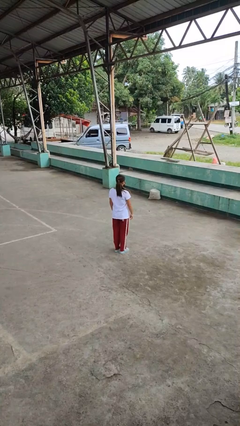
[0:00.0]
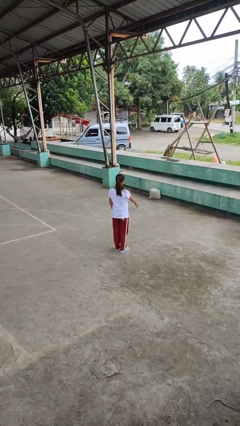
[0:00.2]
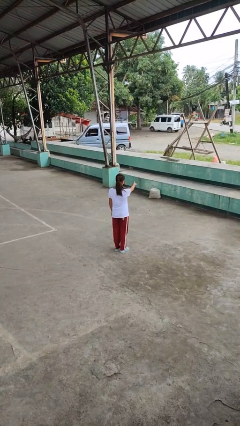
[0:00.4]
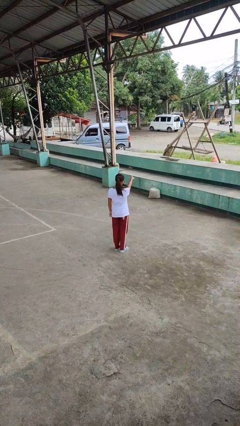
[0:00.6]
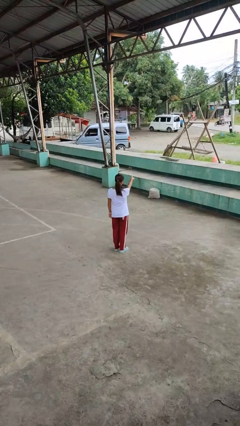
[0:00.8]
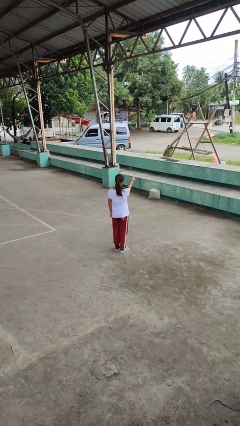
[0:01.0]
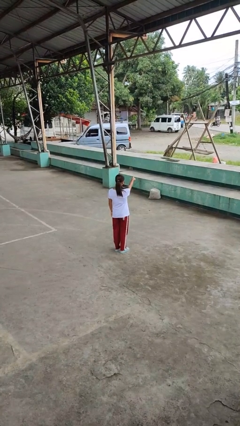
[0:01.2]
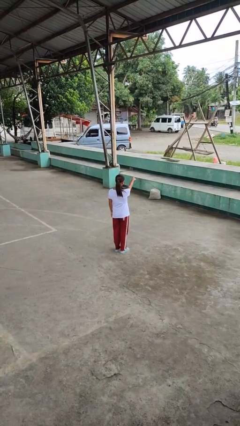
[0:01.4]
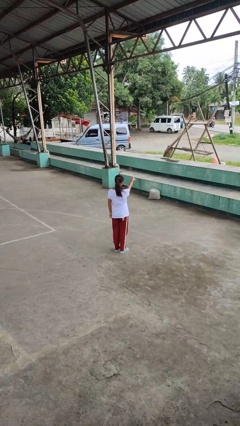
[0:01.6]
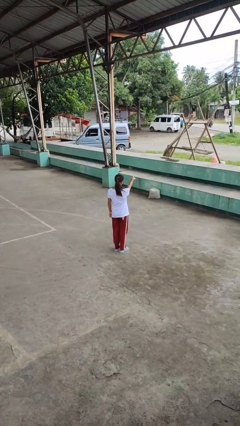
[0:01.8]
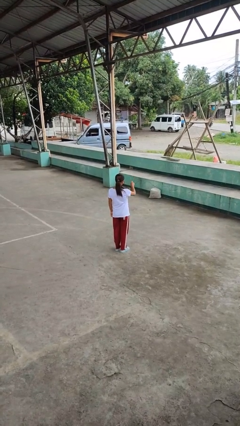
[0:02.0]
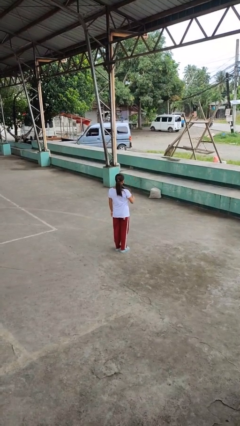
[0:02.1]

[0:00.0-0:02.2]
person points at person

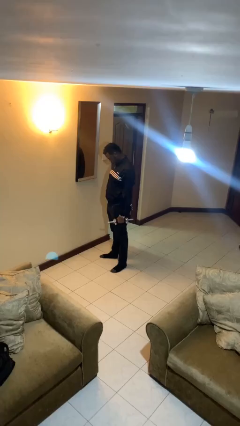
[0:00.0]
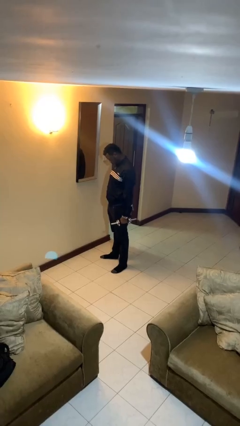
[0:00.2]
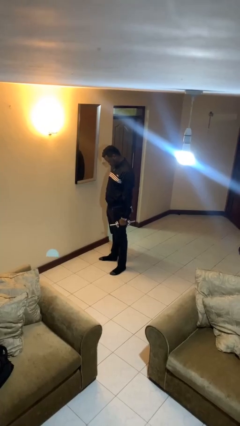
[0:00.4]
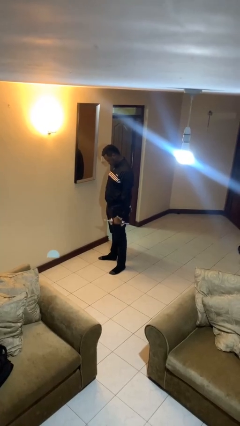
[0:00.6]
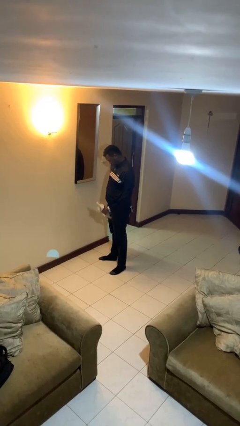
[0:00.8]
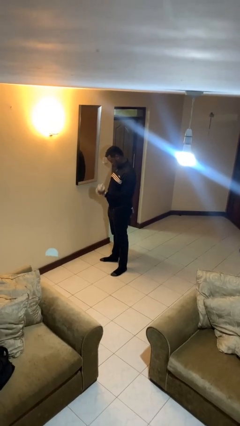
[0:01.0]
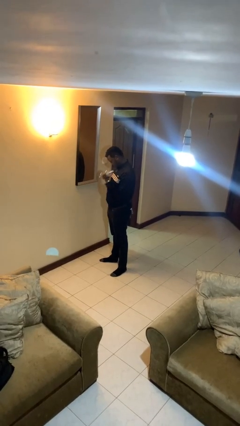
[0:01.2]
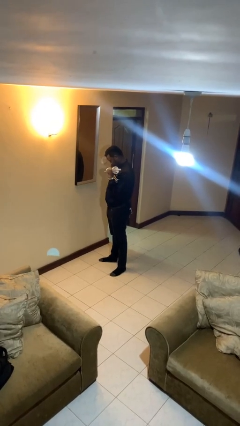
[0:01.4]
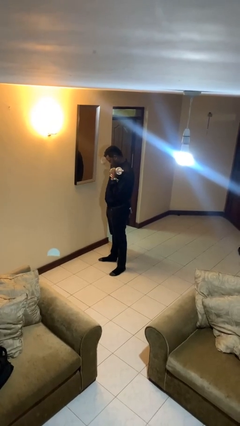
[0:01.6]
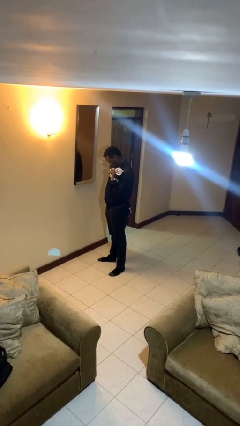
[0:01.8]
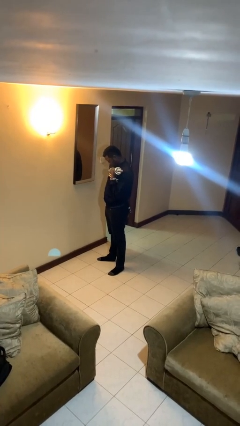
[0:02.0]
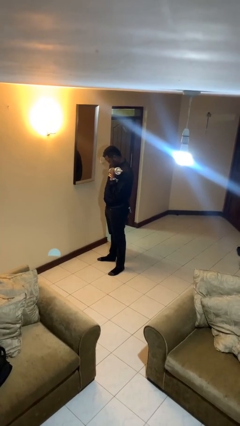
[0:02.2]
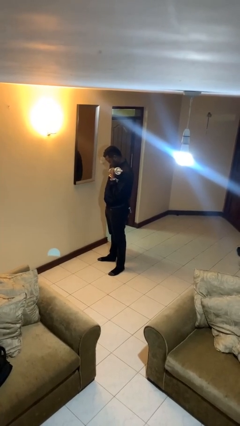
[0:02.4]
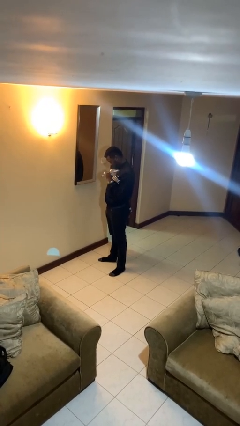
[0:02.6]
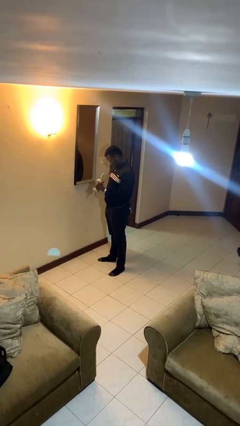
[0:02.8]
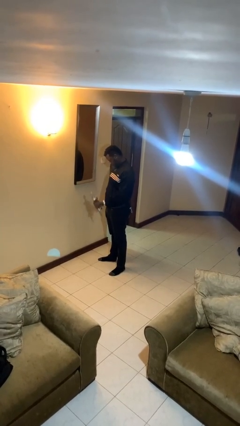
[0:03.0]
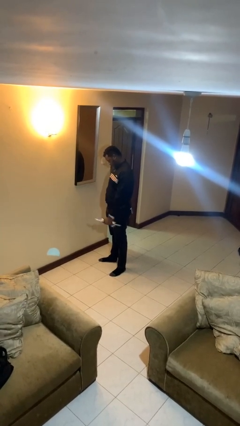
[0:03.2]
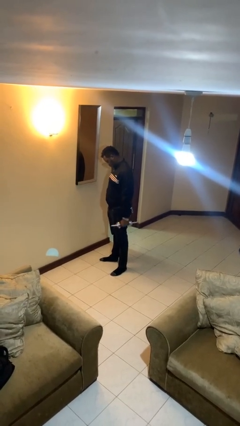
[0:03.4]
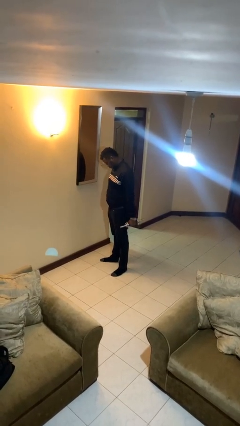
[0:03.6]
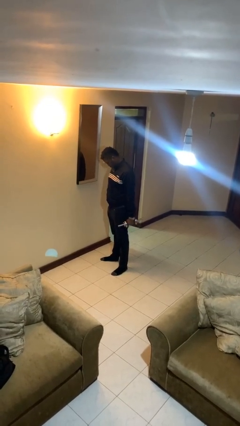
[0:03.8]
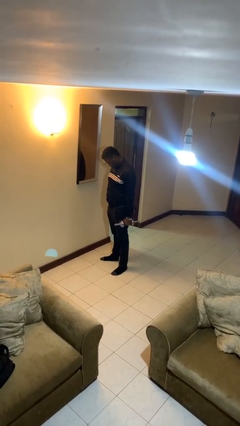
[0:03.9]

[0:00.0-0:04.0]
person lifts dumbbells

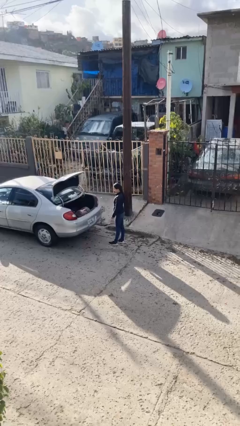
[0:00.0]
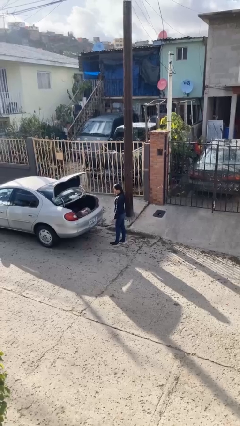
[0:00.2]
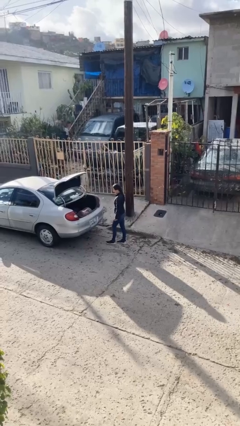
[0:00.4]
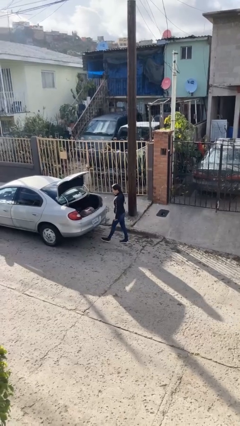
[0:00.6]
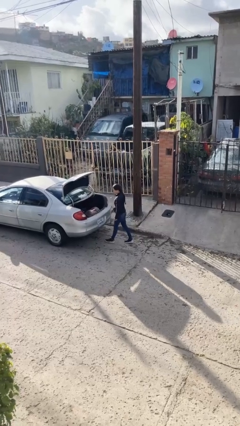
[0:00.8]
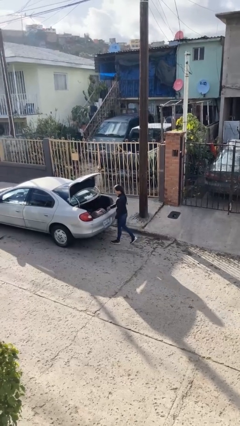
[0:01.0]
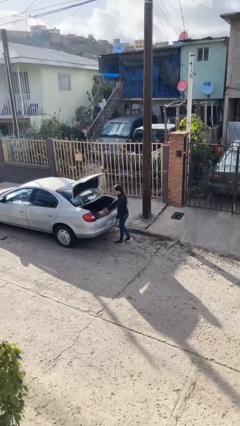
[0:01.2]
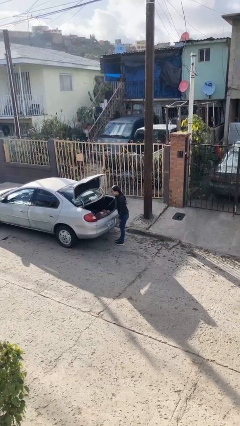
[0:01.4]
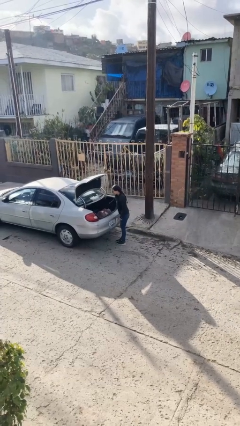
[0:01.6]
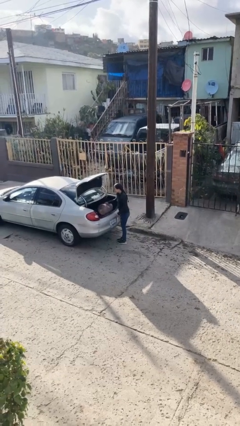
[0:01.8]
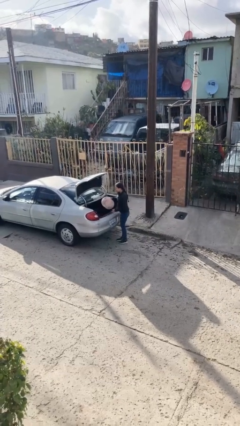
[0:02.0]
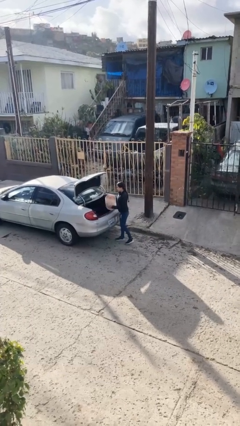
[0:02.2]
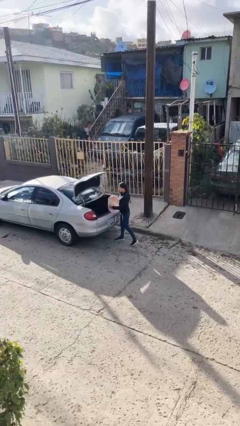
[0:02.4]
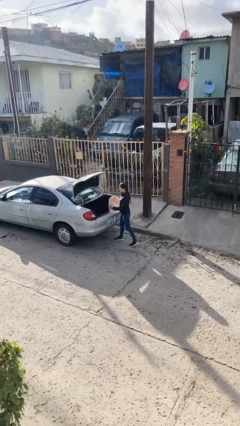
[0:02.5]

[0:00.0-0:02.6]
person unloads car

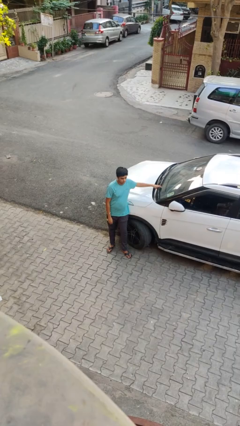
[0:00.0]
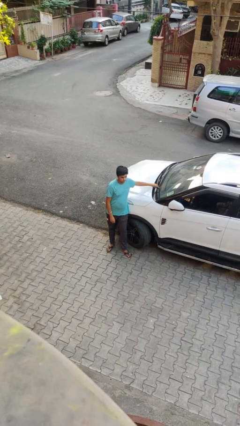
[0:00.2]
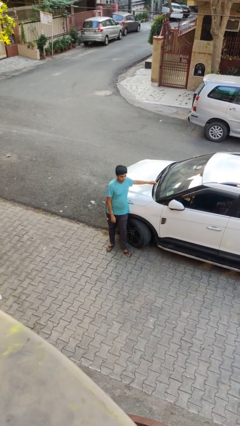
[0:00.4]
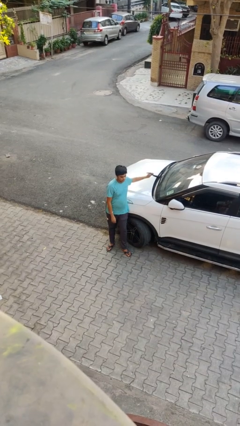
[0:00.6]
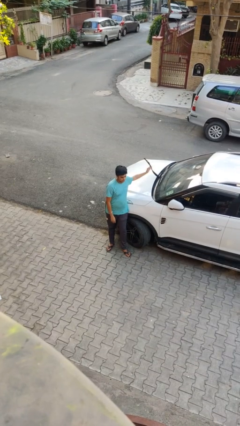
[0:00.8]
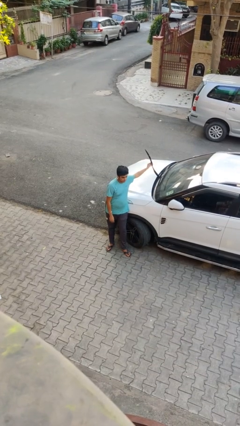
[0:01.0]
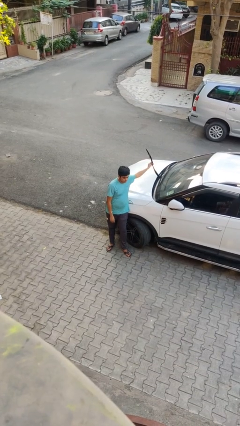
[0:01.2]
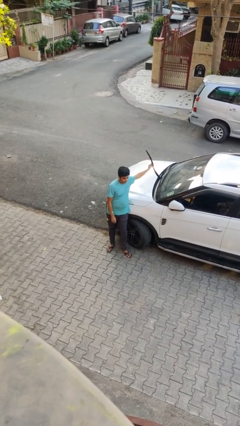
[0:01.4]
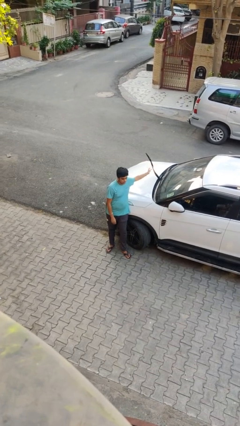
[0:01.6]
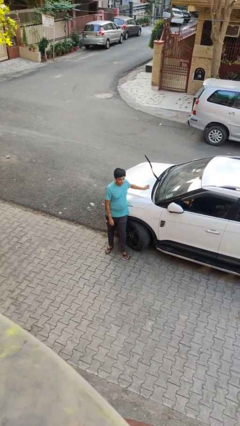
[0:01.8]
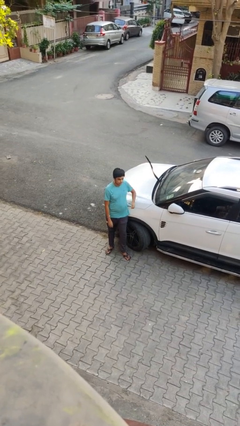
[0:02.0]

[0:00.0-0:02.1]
person flips up car wipers

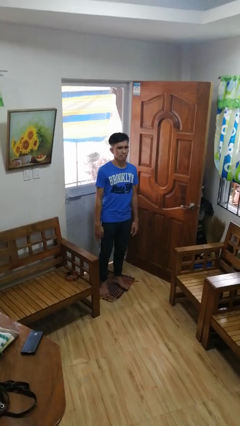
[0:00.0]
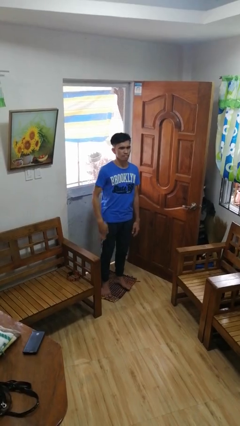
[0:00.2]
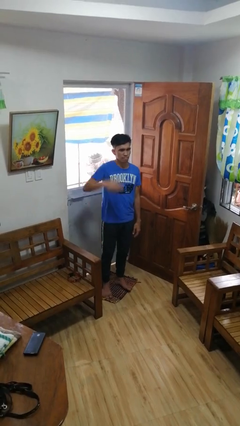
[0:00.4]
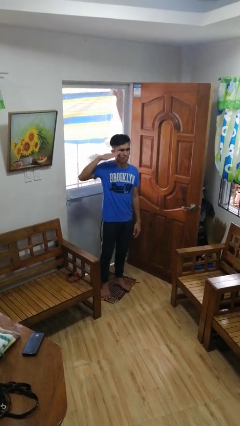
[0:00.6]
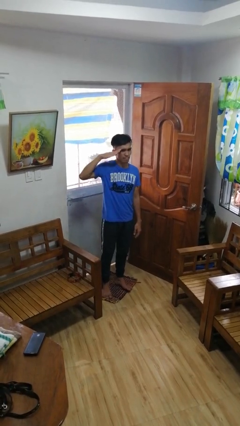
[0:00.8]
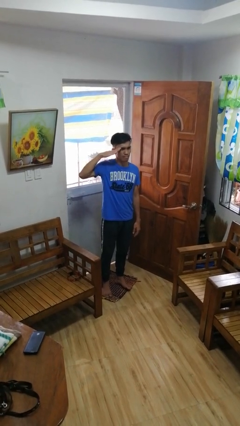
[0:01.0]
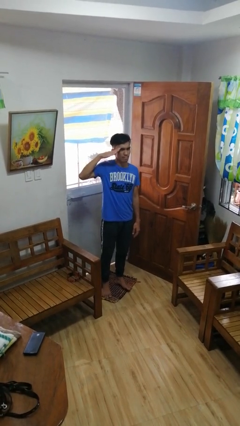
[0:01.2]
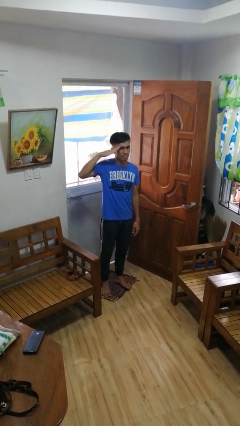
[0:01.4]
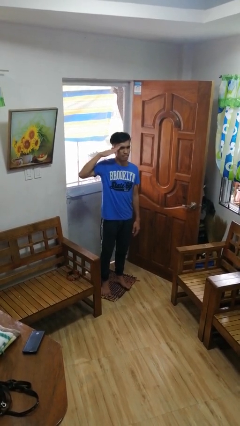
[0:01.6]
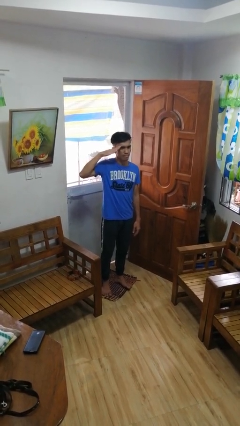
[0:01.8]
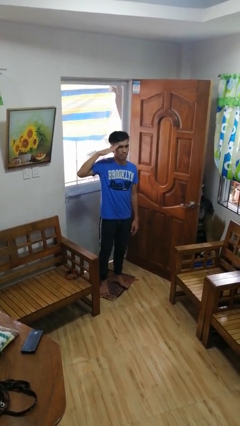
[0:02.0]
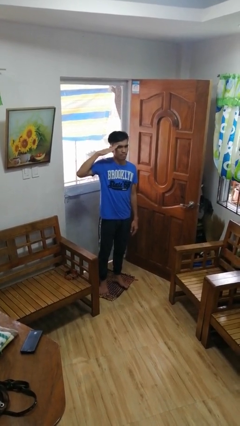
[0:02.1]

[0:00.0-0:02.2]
person salutes

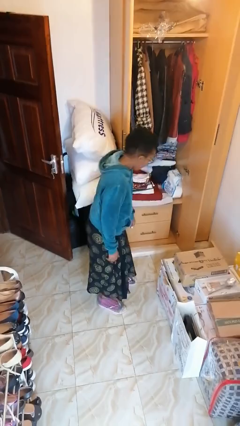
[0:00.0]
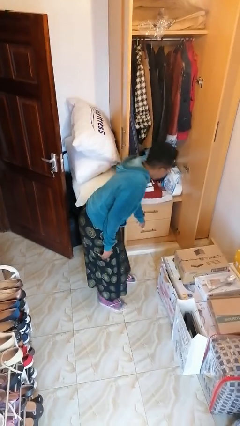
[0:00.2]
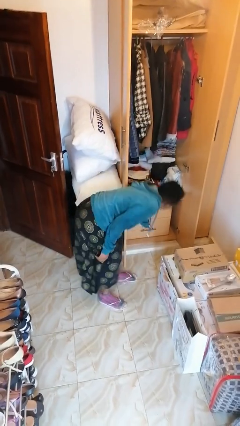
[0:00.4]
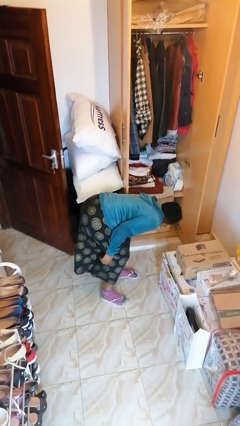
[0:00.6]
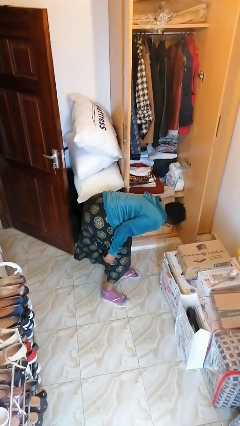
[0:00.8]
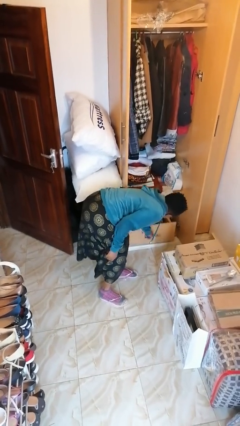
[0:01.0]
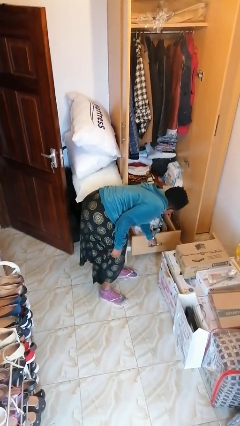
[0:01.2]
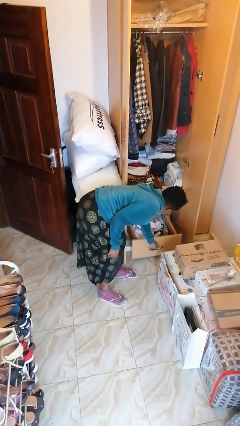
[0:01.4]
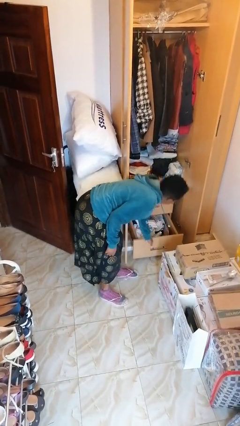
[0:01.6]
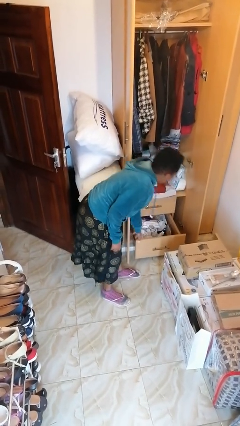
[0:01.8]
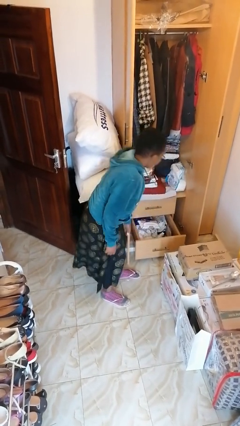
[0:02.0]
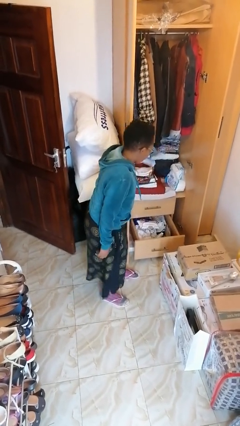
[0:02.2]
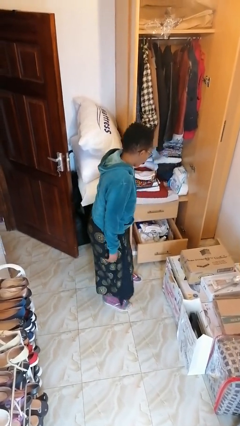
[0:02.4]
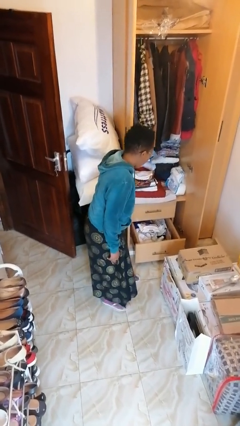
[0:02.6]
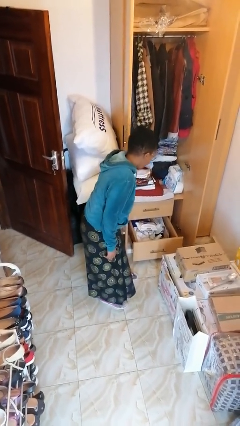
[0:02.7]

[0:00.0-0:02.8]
person opens dresser drawer

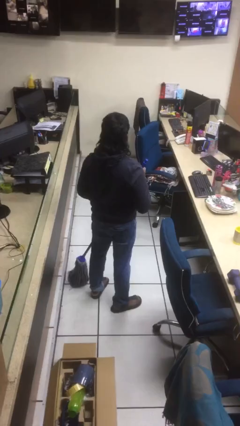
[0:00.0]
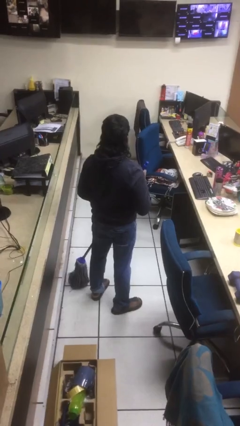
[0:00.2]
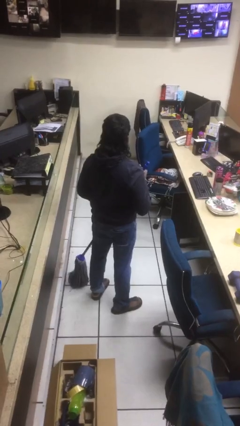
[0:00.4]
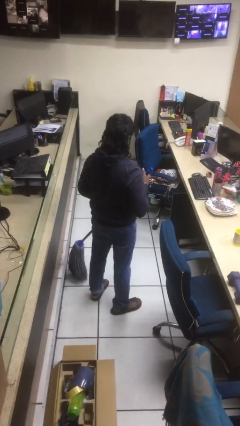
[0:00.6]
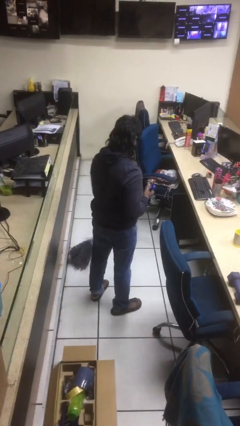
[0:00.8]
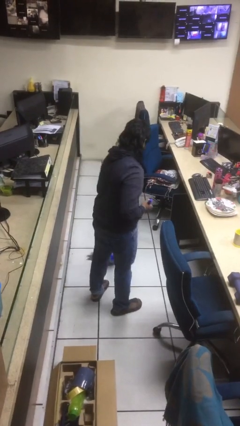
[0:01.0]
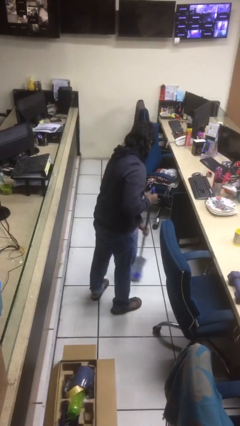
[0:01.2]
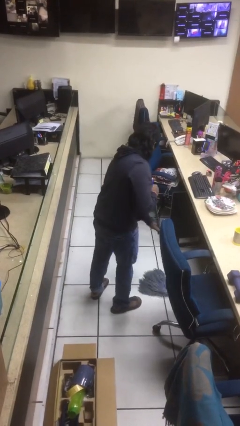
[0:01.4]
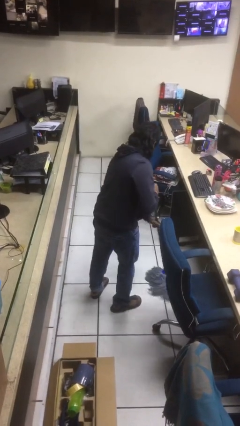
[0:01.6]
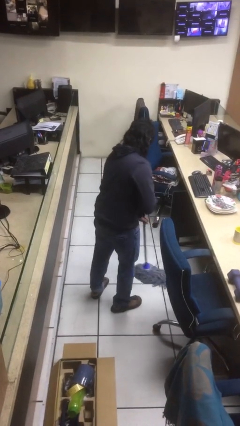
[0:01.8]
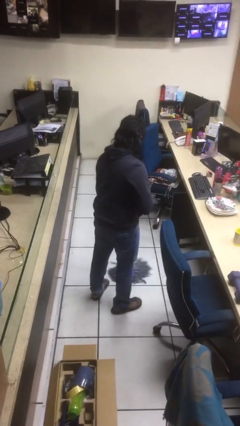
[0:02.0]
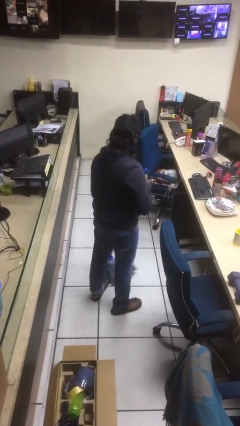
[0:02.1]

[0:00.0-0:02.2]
person mops
